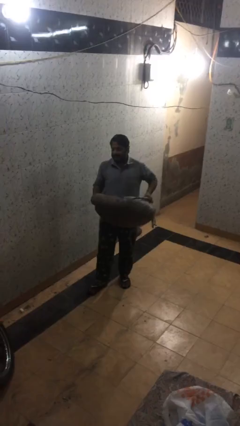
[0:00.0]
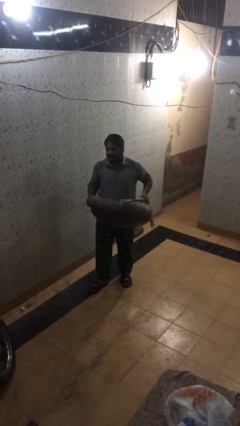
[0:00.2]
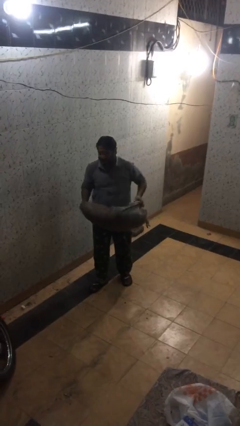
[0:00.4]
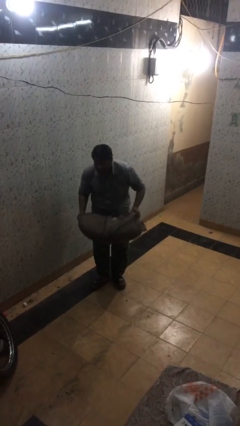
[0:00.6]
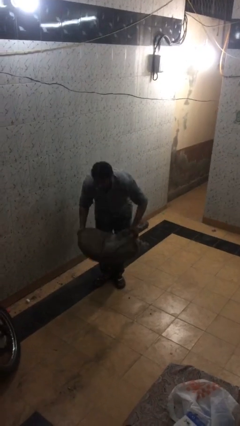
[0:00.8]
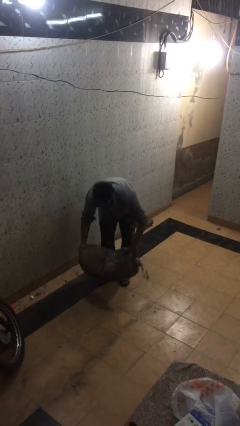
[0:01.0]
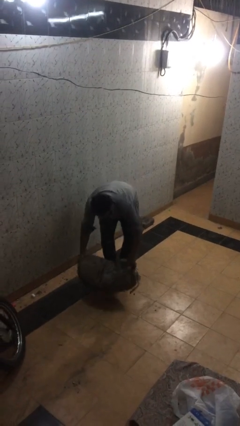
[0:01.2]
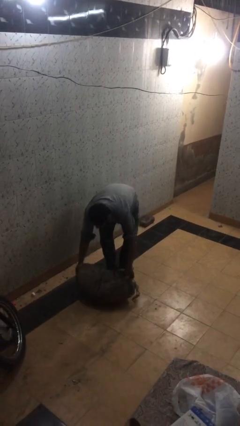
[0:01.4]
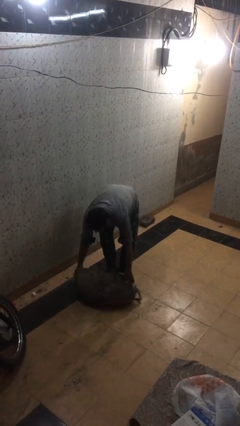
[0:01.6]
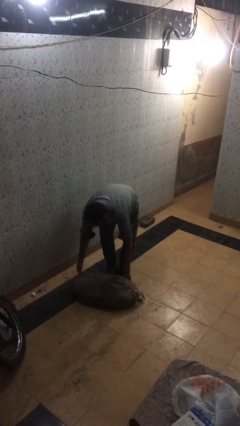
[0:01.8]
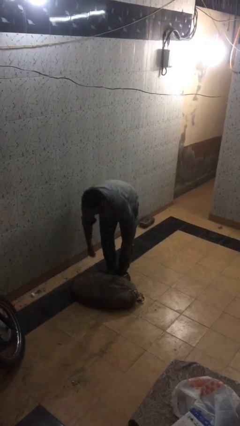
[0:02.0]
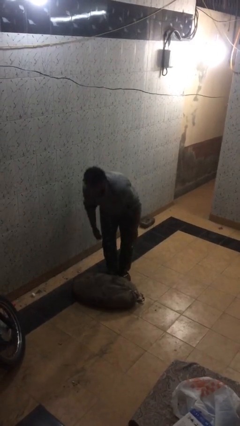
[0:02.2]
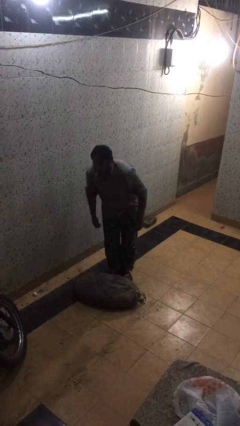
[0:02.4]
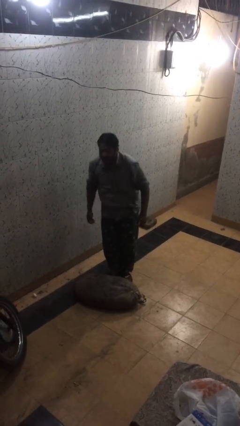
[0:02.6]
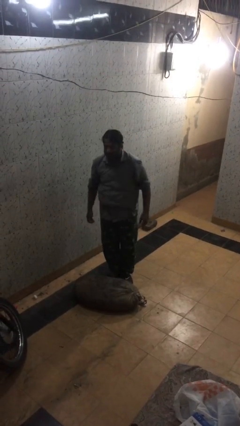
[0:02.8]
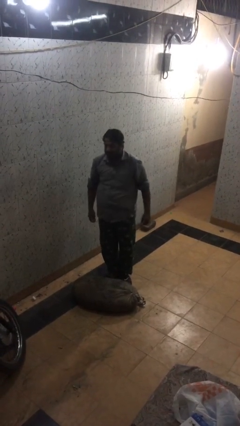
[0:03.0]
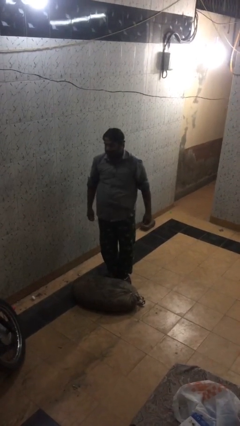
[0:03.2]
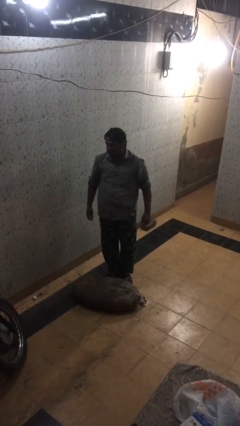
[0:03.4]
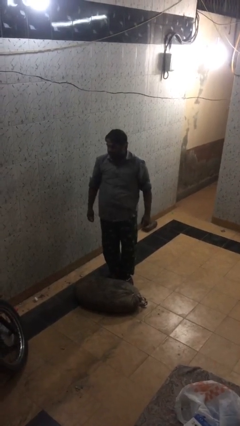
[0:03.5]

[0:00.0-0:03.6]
person puts down object on floor

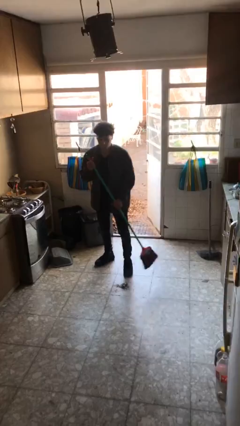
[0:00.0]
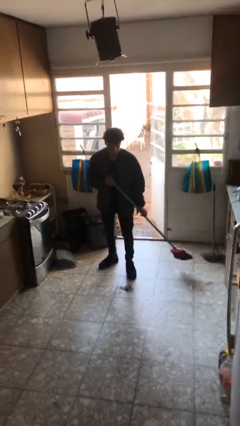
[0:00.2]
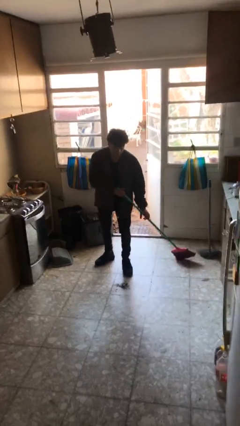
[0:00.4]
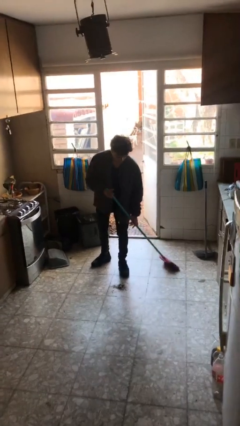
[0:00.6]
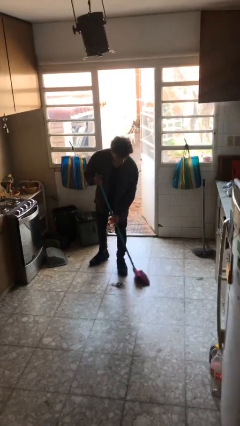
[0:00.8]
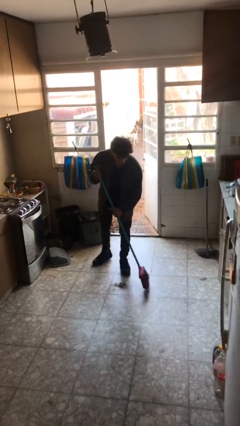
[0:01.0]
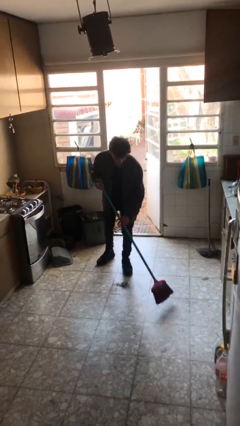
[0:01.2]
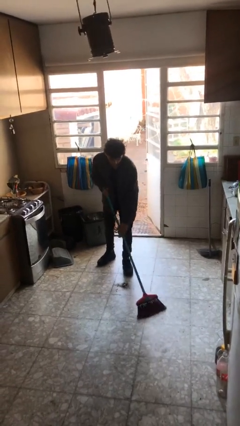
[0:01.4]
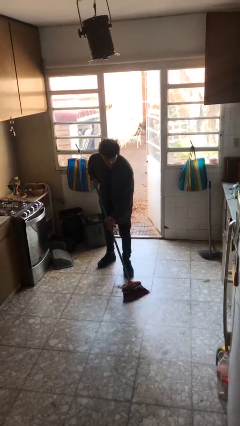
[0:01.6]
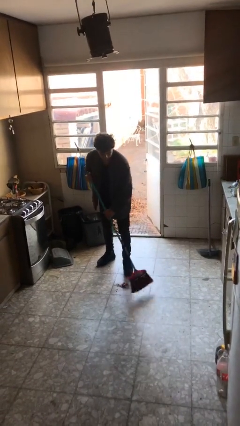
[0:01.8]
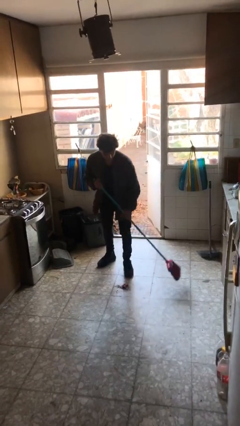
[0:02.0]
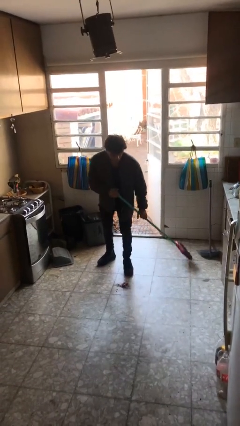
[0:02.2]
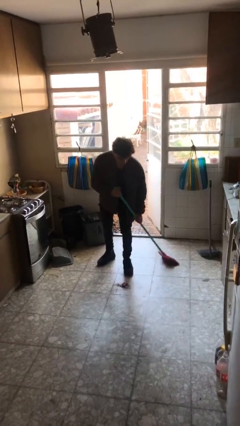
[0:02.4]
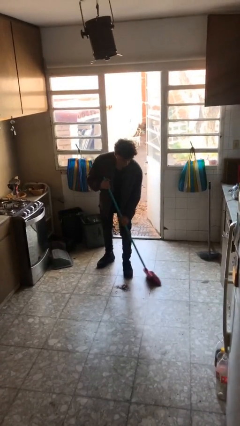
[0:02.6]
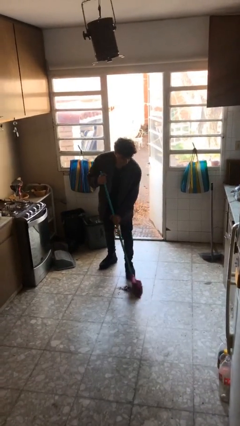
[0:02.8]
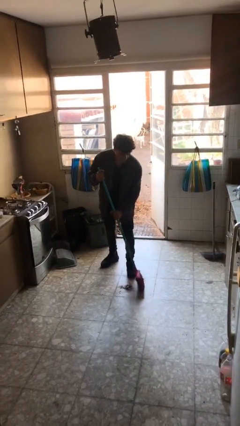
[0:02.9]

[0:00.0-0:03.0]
person sweeps floor

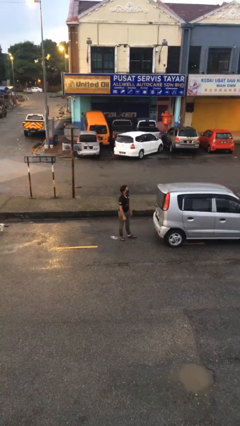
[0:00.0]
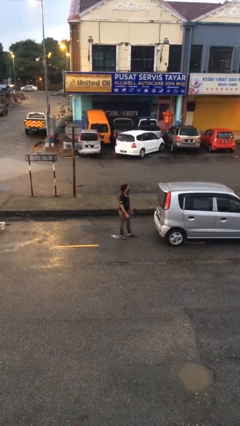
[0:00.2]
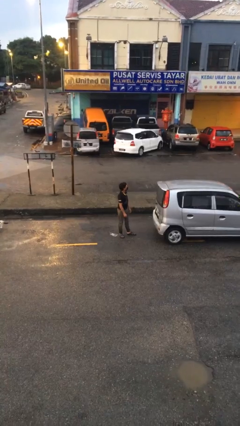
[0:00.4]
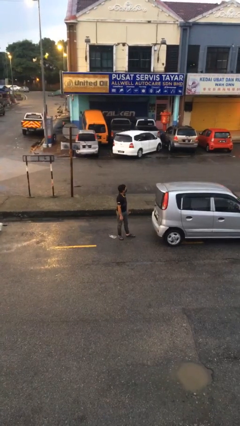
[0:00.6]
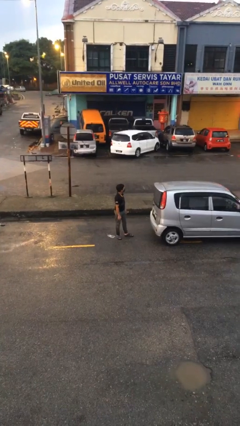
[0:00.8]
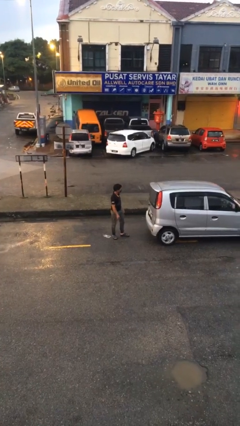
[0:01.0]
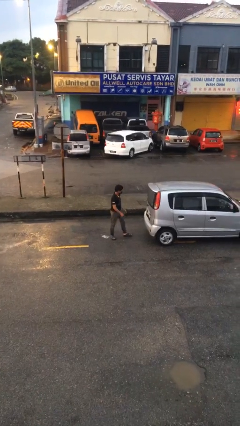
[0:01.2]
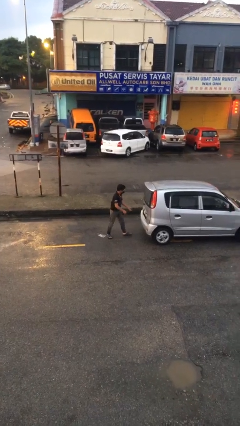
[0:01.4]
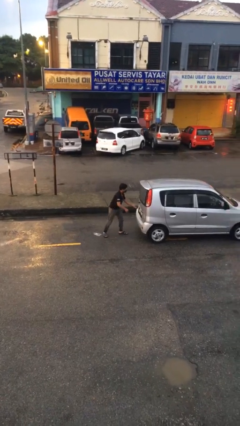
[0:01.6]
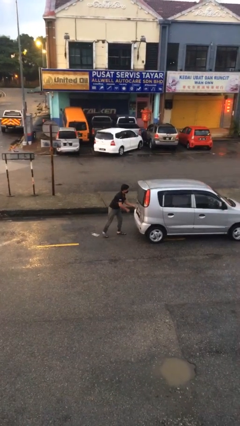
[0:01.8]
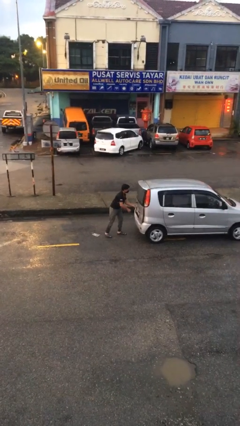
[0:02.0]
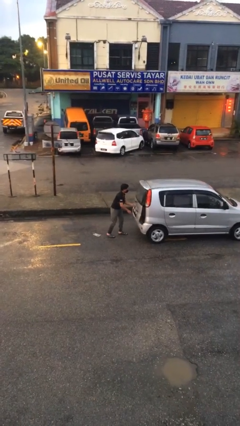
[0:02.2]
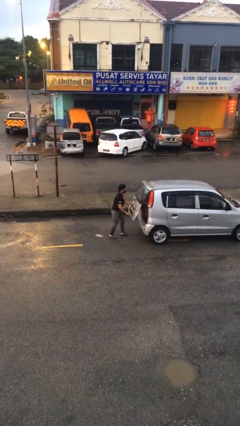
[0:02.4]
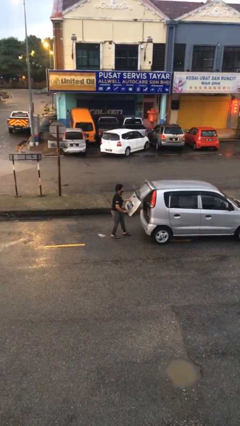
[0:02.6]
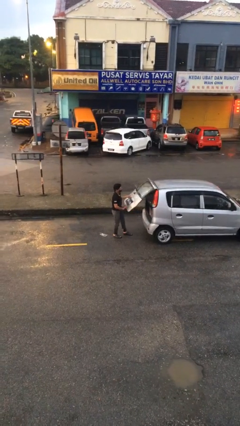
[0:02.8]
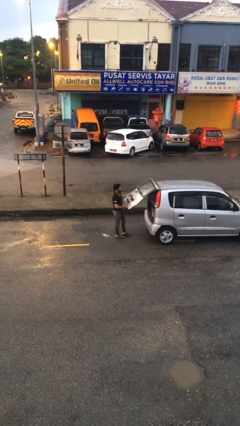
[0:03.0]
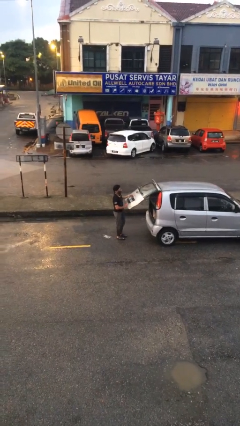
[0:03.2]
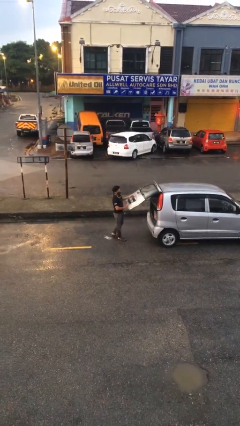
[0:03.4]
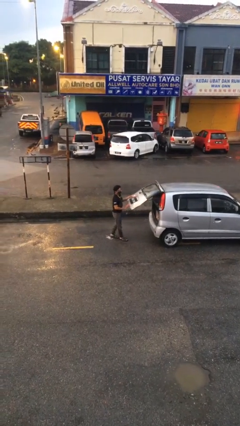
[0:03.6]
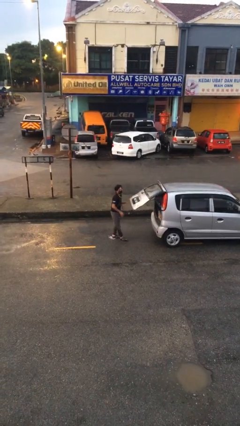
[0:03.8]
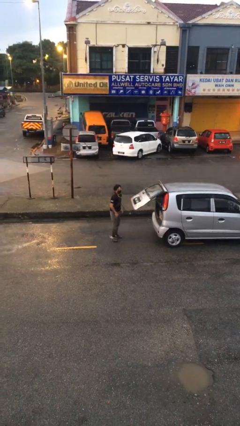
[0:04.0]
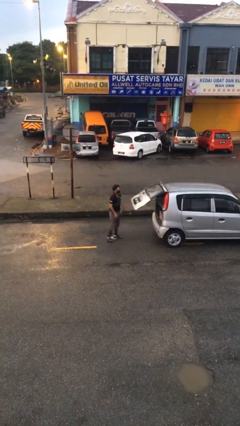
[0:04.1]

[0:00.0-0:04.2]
person opens car trunk

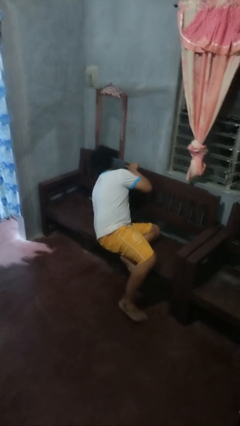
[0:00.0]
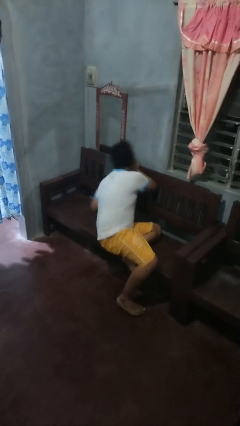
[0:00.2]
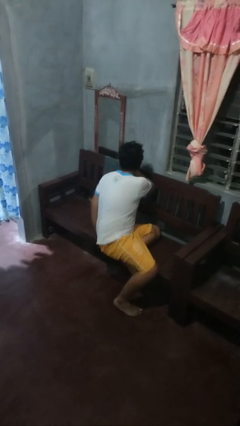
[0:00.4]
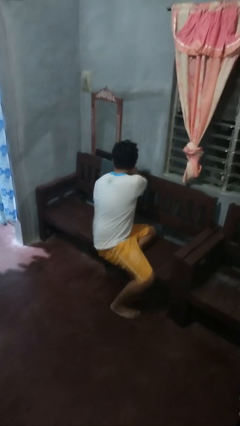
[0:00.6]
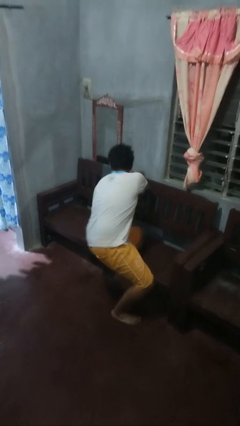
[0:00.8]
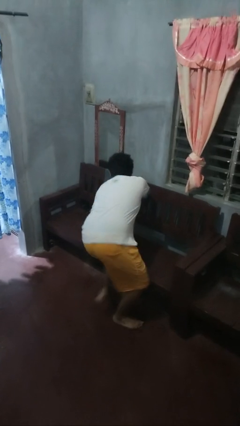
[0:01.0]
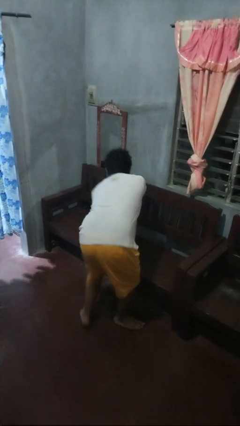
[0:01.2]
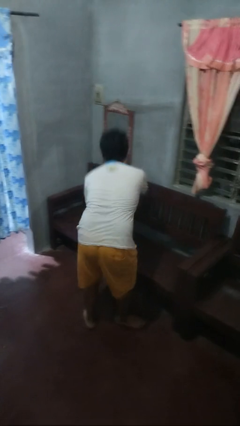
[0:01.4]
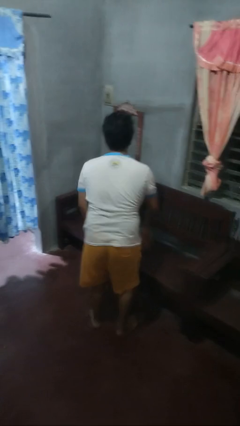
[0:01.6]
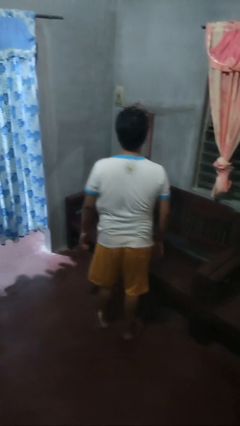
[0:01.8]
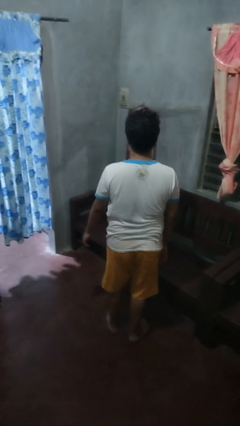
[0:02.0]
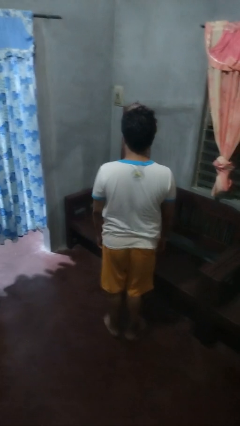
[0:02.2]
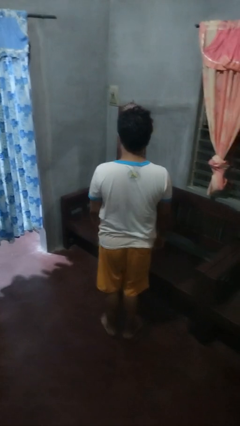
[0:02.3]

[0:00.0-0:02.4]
person stands up

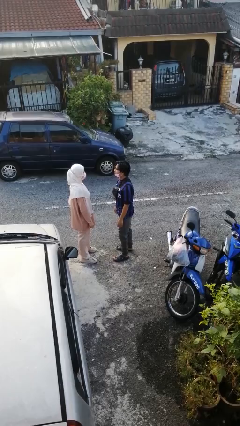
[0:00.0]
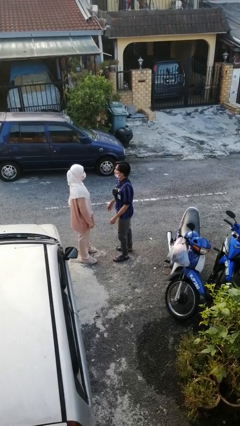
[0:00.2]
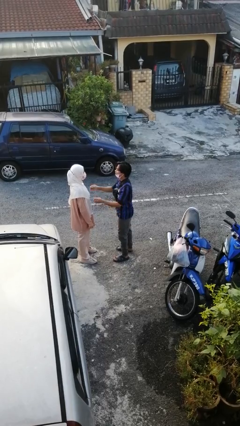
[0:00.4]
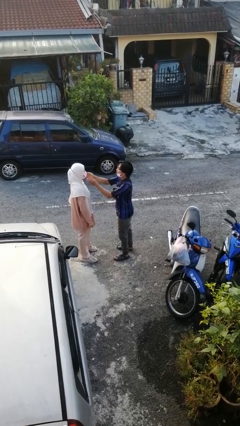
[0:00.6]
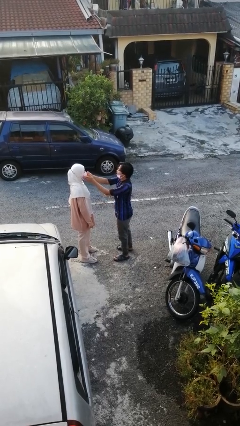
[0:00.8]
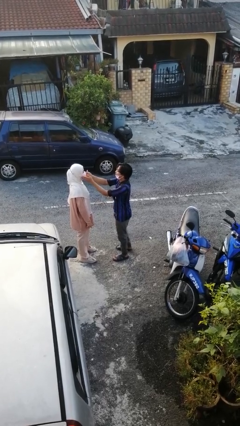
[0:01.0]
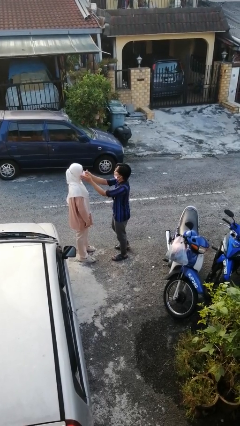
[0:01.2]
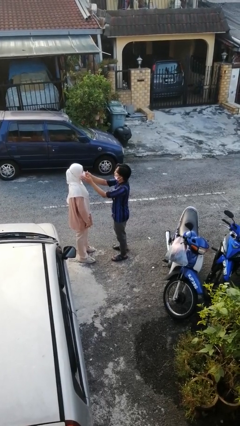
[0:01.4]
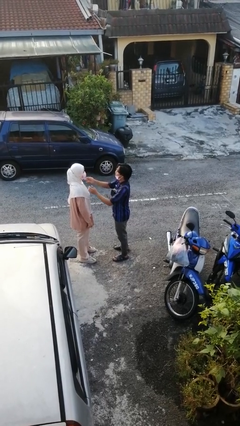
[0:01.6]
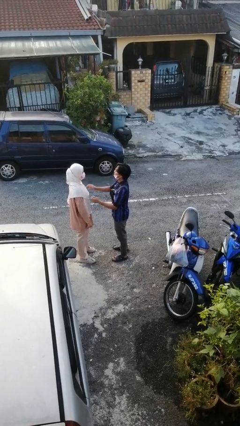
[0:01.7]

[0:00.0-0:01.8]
person touches face of person

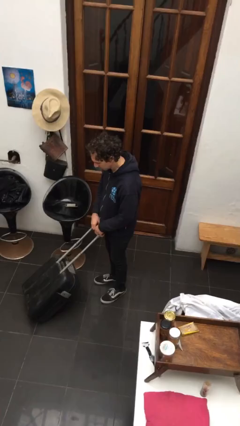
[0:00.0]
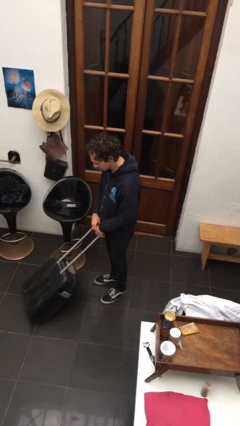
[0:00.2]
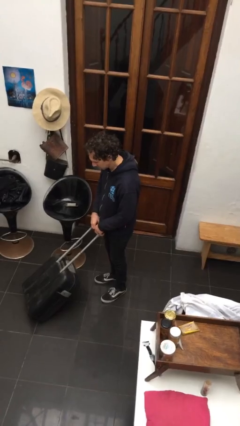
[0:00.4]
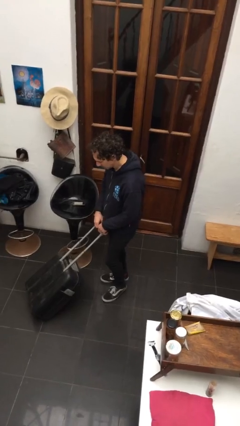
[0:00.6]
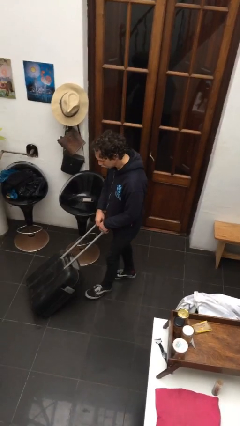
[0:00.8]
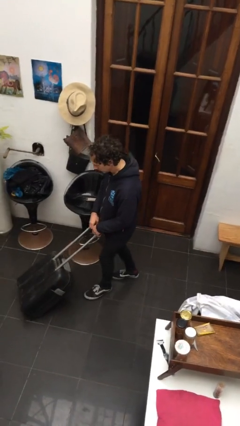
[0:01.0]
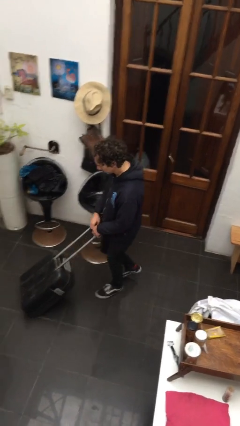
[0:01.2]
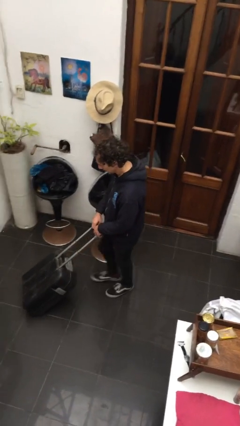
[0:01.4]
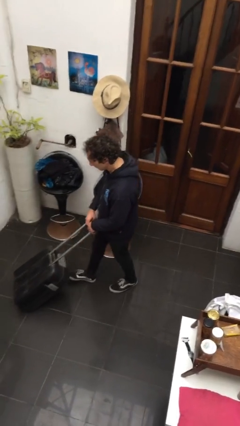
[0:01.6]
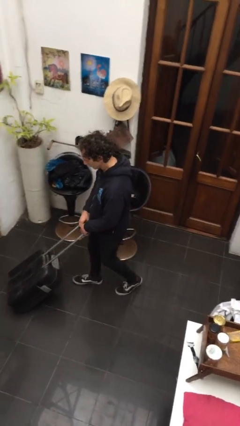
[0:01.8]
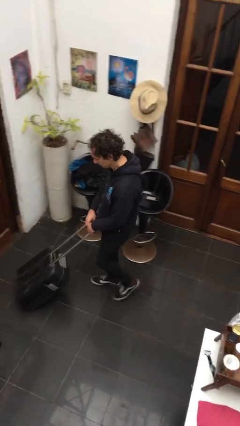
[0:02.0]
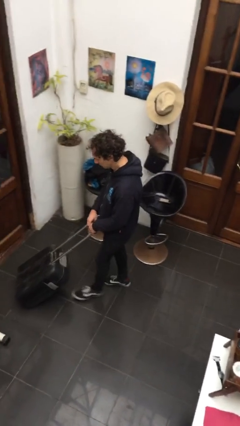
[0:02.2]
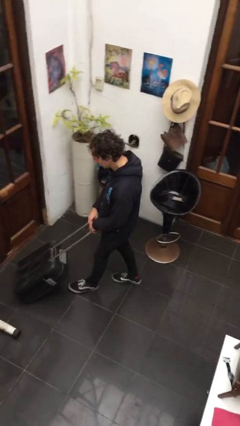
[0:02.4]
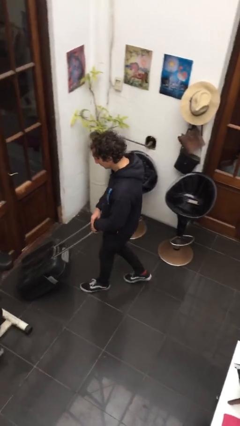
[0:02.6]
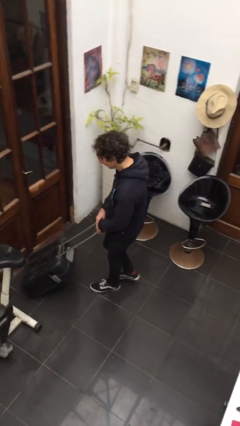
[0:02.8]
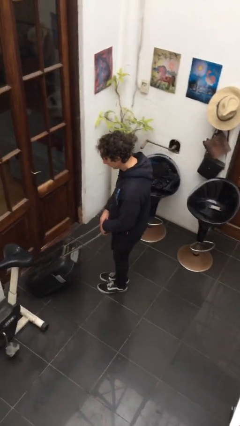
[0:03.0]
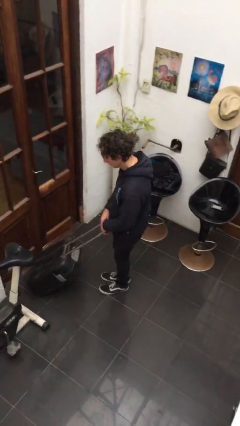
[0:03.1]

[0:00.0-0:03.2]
person pushes wheeled cart
